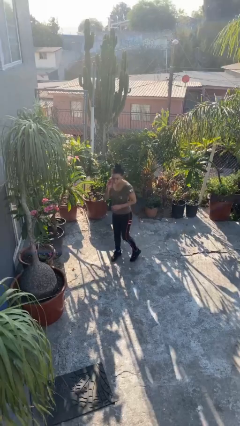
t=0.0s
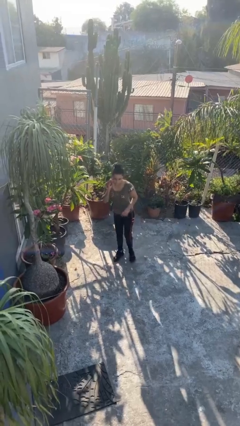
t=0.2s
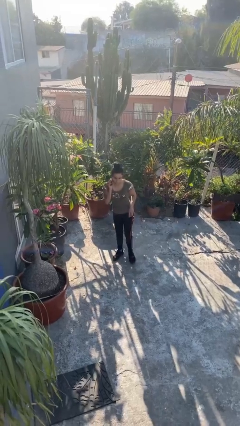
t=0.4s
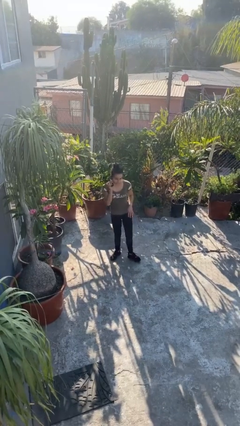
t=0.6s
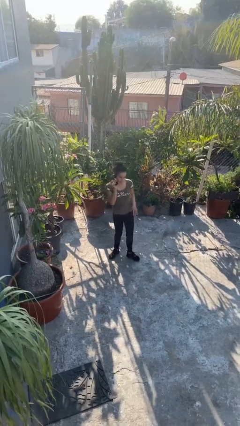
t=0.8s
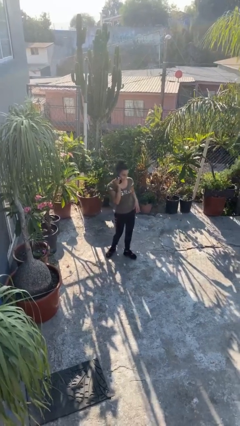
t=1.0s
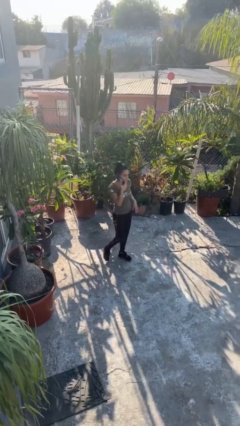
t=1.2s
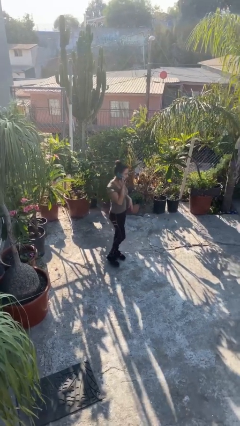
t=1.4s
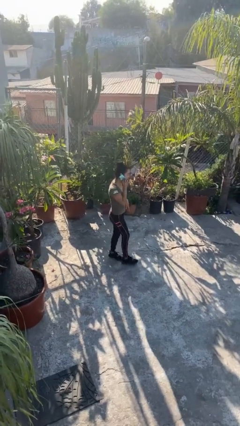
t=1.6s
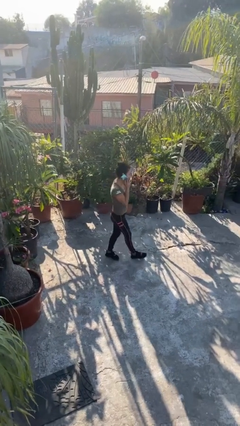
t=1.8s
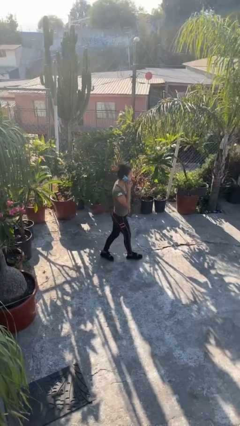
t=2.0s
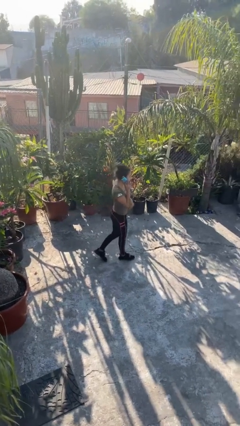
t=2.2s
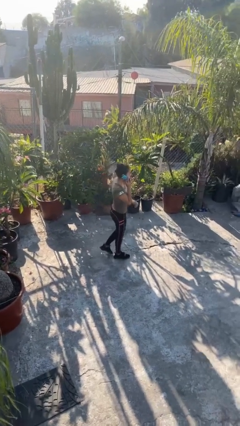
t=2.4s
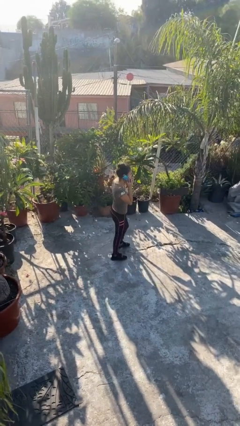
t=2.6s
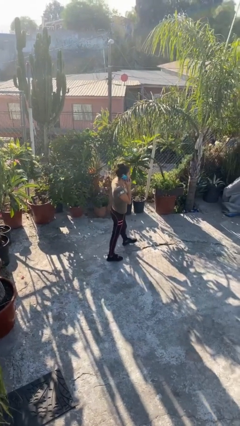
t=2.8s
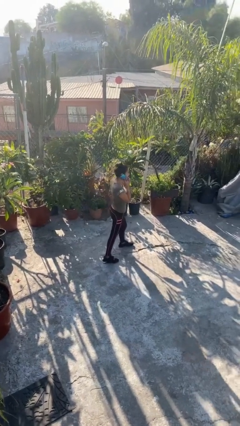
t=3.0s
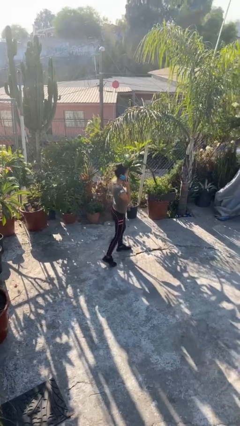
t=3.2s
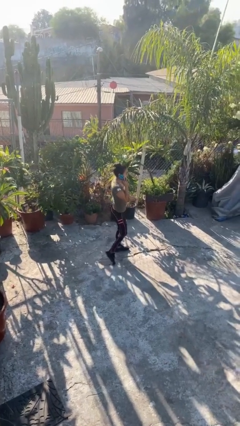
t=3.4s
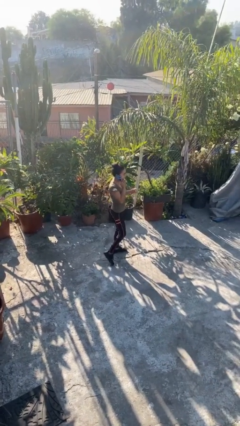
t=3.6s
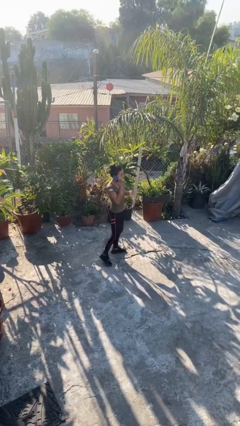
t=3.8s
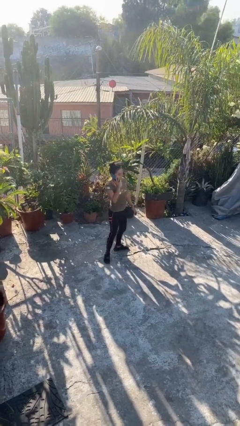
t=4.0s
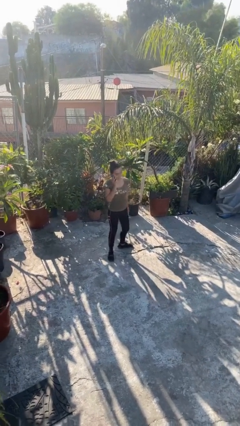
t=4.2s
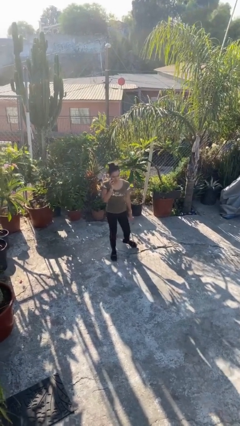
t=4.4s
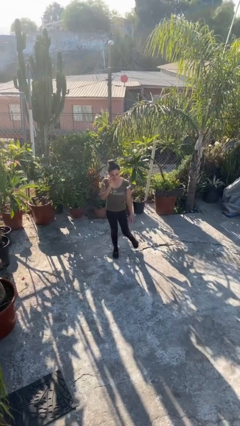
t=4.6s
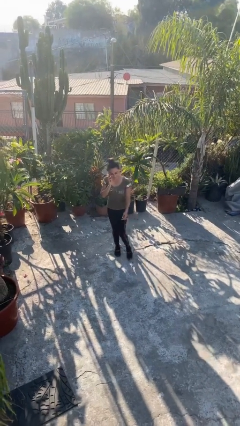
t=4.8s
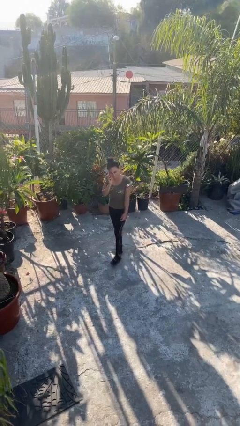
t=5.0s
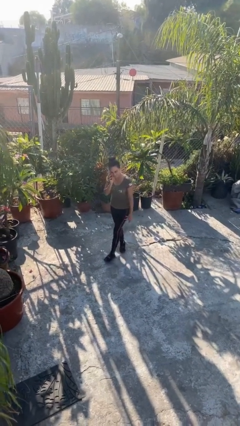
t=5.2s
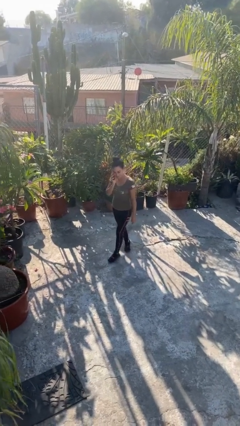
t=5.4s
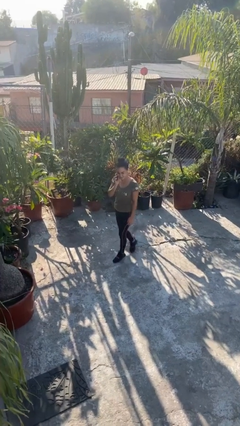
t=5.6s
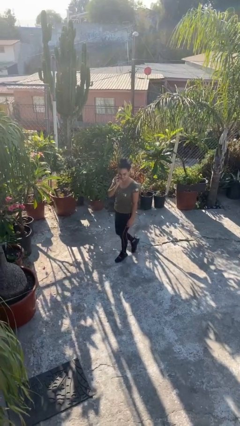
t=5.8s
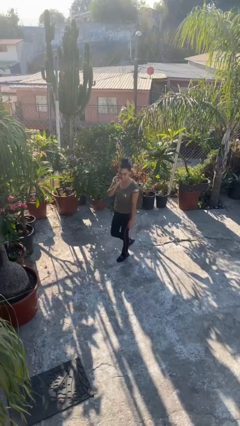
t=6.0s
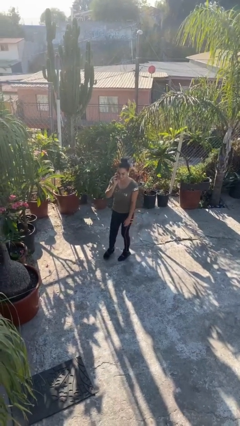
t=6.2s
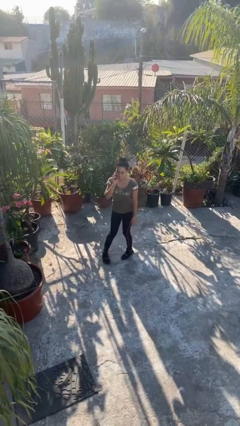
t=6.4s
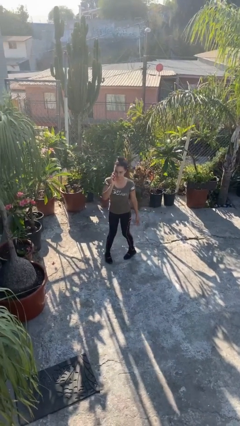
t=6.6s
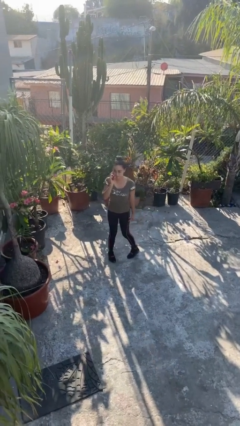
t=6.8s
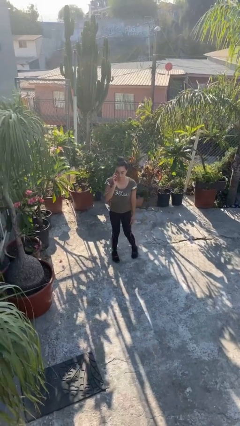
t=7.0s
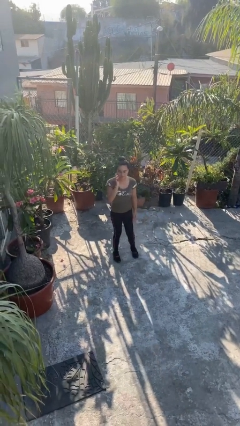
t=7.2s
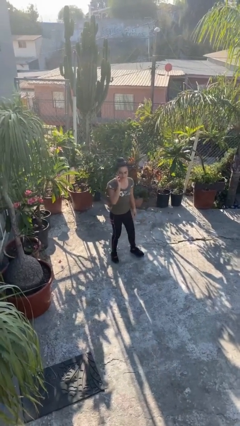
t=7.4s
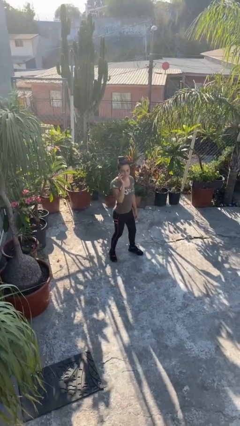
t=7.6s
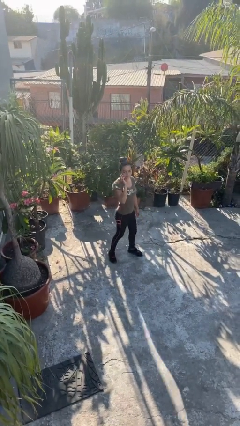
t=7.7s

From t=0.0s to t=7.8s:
person talks on phone

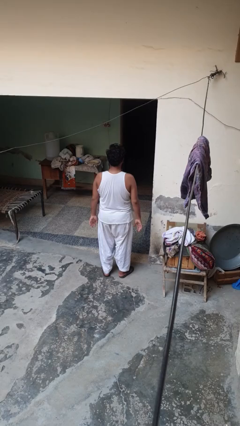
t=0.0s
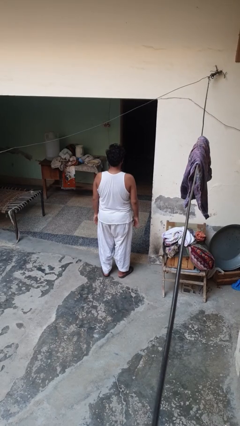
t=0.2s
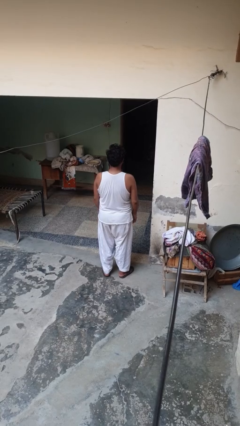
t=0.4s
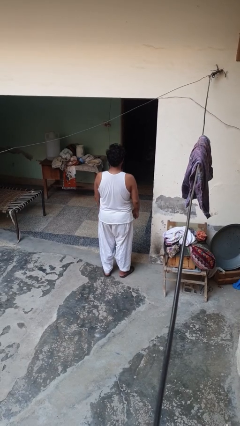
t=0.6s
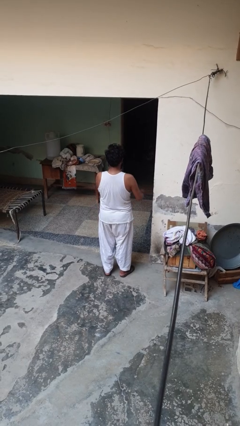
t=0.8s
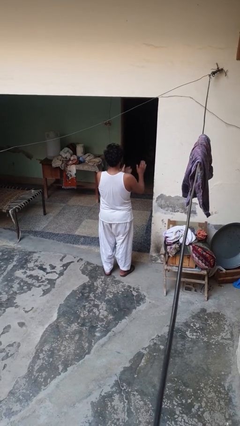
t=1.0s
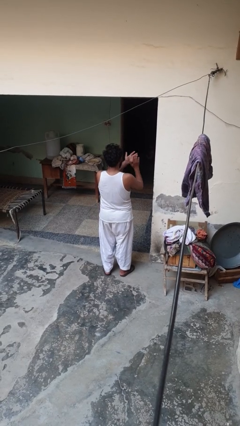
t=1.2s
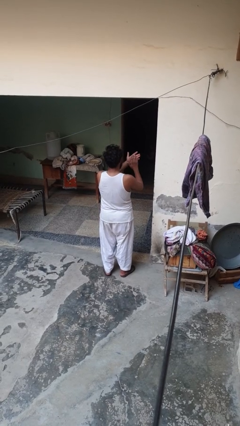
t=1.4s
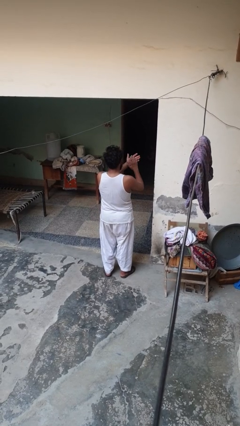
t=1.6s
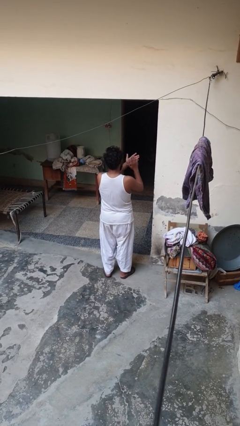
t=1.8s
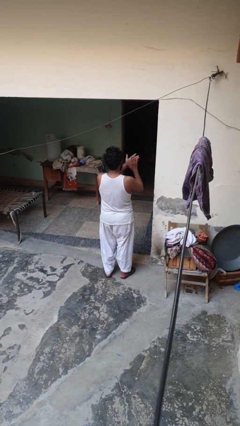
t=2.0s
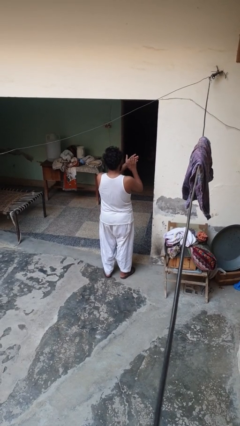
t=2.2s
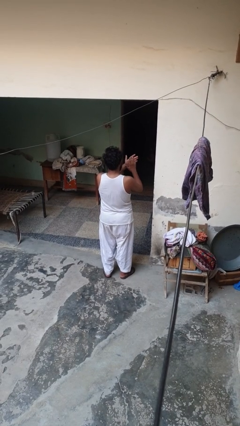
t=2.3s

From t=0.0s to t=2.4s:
person claps hands

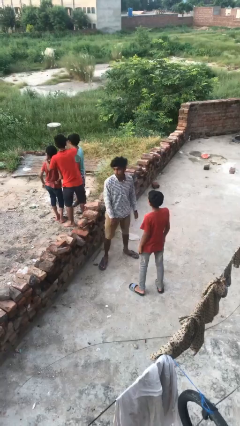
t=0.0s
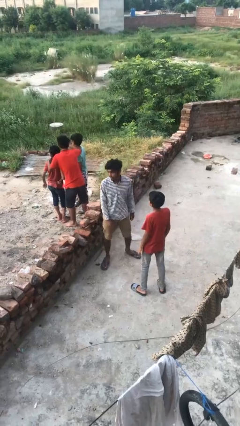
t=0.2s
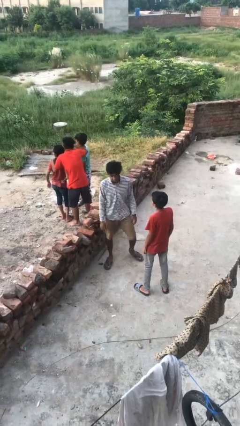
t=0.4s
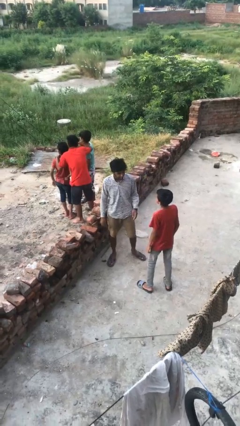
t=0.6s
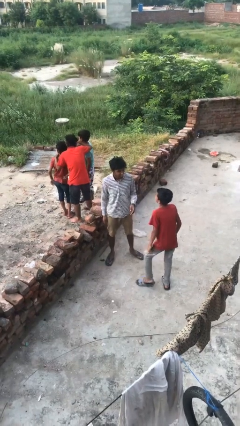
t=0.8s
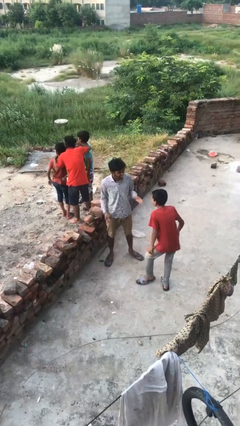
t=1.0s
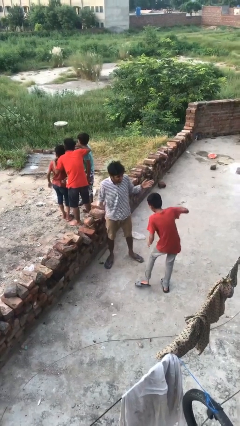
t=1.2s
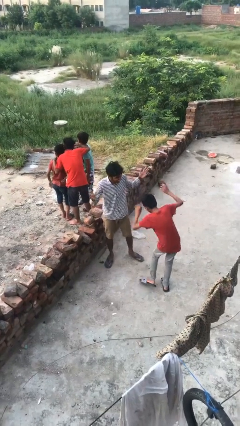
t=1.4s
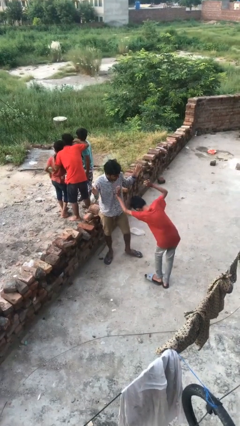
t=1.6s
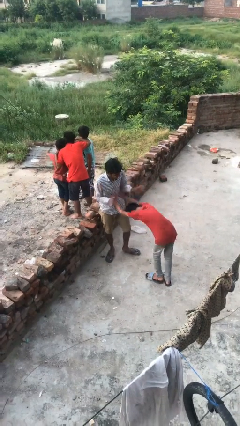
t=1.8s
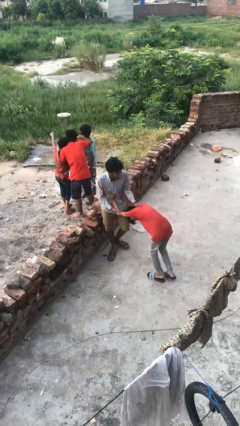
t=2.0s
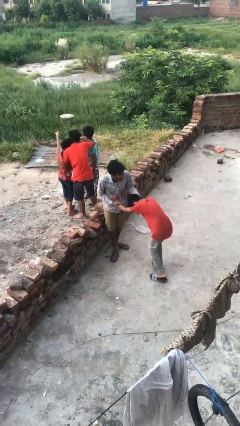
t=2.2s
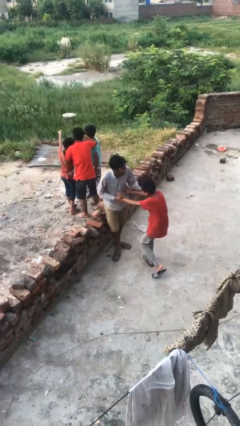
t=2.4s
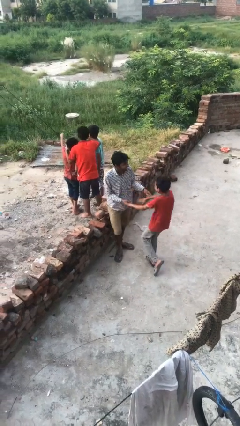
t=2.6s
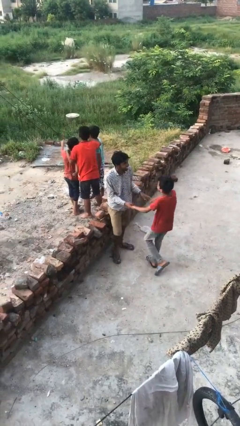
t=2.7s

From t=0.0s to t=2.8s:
person laughs with person

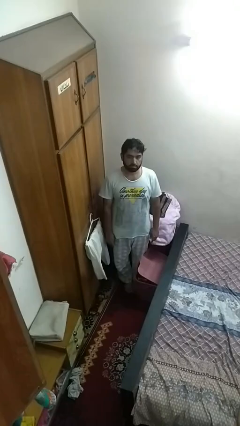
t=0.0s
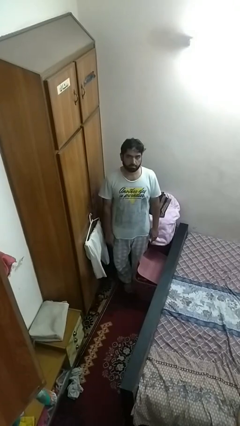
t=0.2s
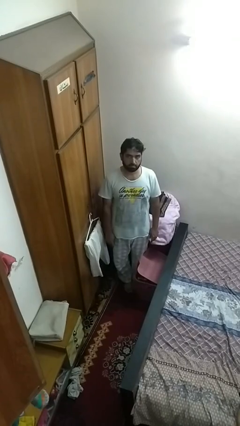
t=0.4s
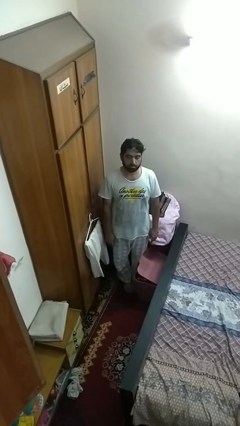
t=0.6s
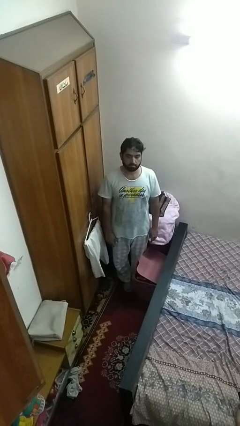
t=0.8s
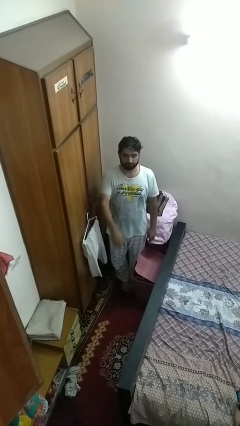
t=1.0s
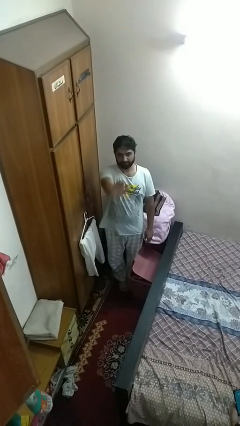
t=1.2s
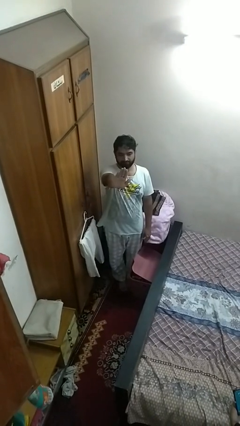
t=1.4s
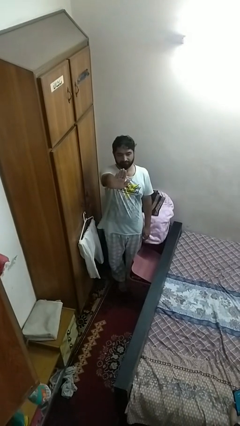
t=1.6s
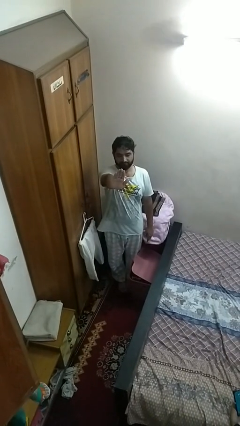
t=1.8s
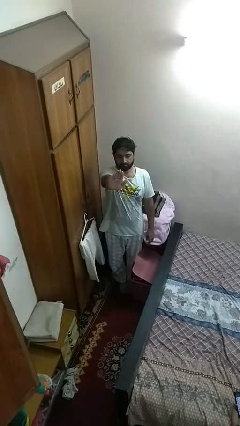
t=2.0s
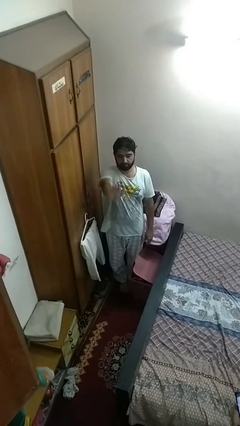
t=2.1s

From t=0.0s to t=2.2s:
person gestures stop

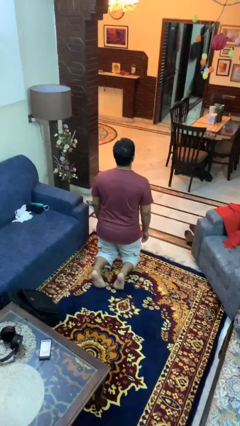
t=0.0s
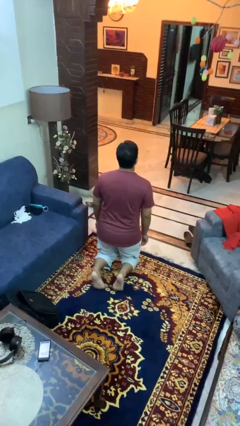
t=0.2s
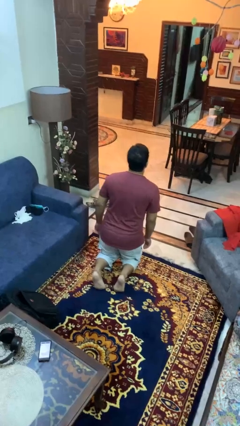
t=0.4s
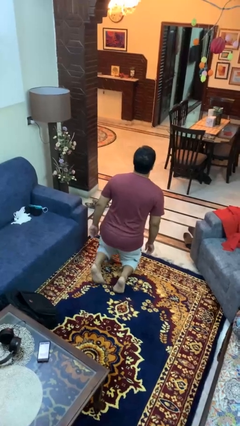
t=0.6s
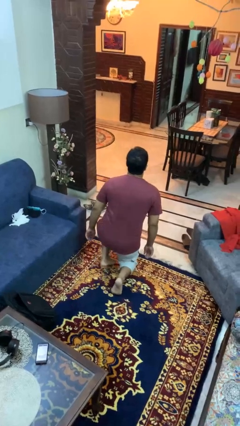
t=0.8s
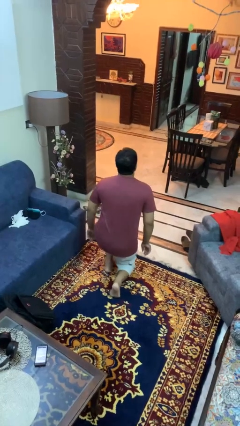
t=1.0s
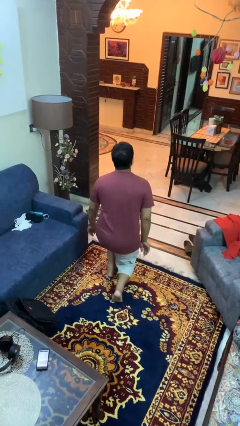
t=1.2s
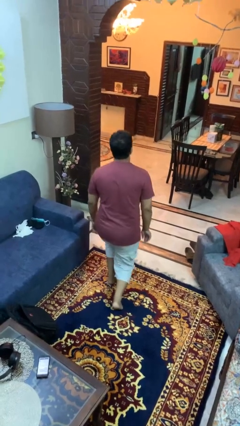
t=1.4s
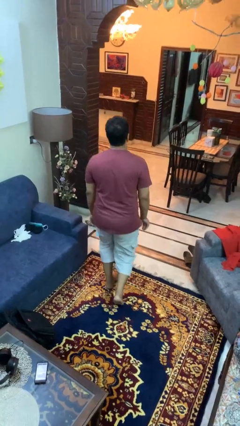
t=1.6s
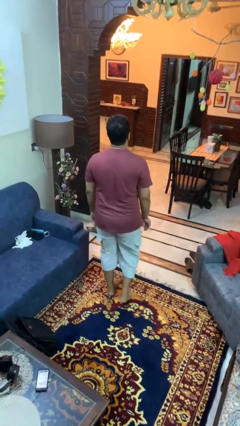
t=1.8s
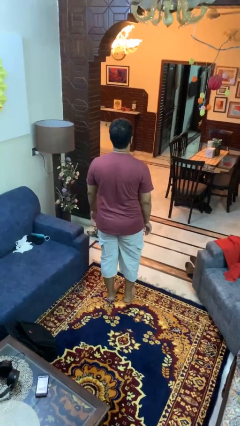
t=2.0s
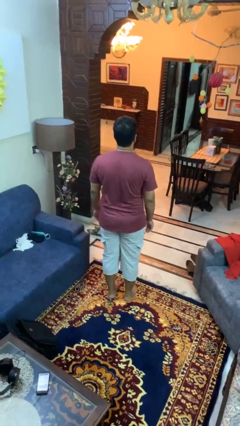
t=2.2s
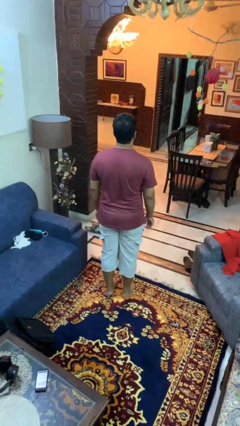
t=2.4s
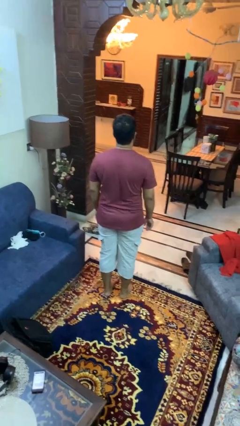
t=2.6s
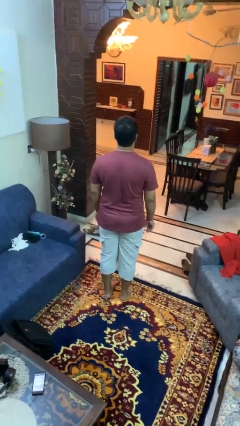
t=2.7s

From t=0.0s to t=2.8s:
person stands up from floor
